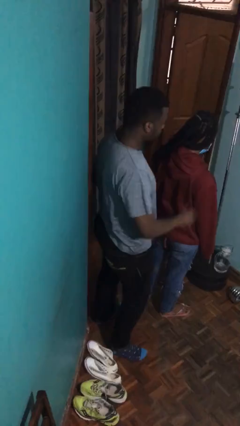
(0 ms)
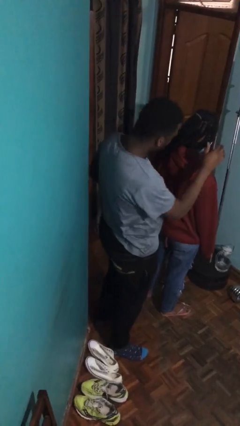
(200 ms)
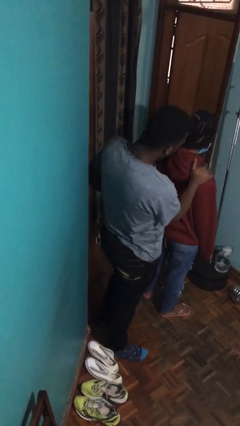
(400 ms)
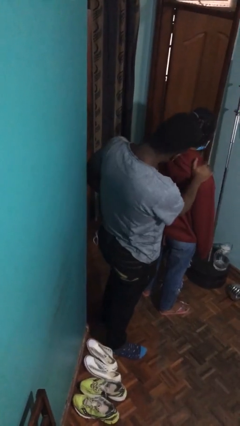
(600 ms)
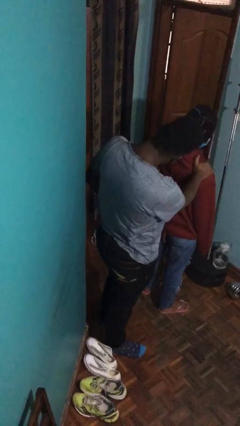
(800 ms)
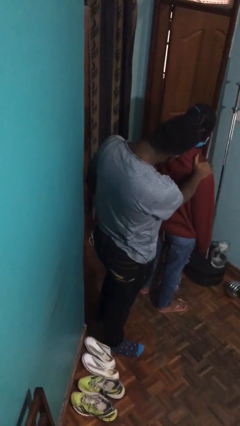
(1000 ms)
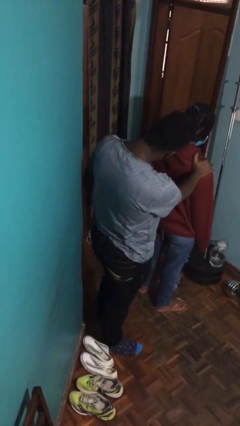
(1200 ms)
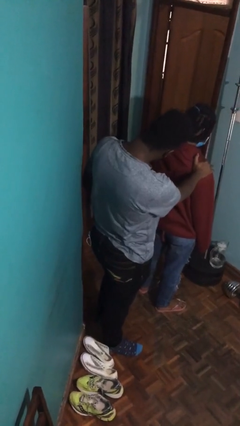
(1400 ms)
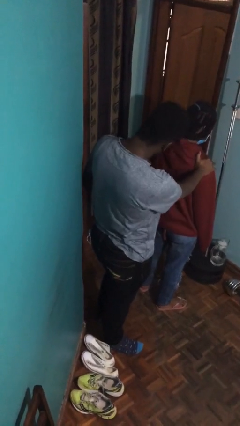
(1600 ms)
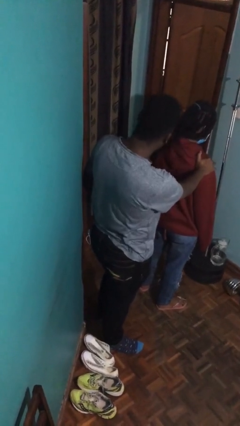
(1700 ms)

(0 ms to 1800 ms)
person grabs person by shoulder

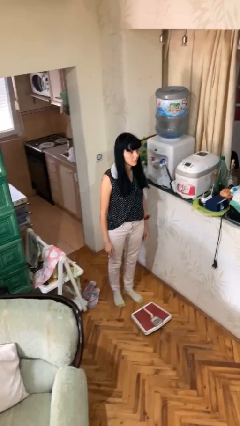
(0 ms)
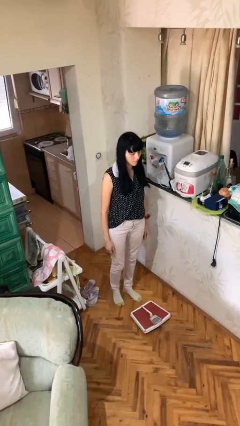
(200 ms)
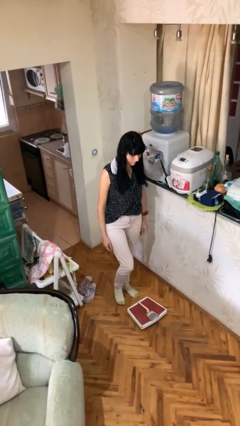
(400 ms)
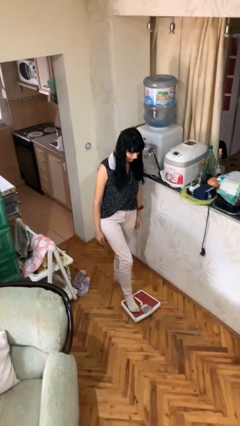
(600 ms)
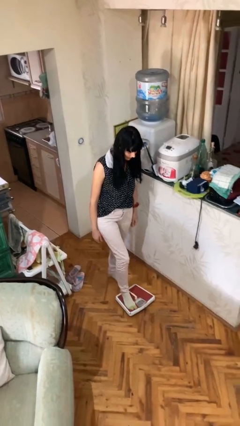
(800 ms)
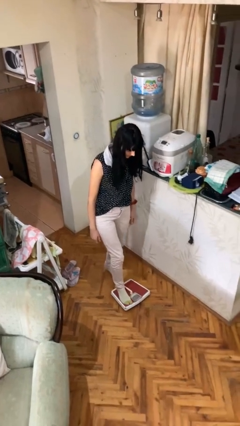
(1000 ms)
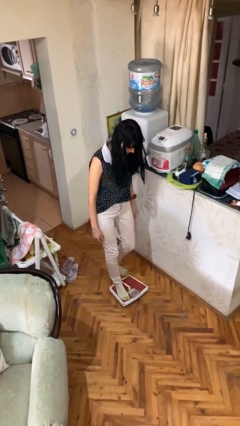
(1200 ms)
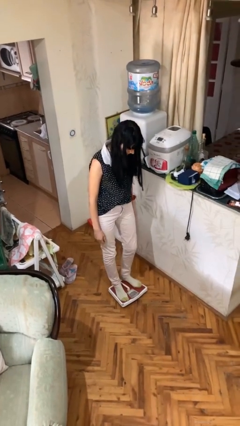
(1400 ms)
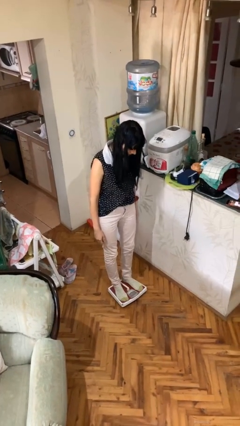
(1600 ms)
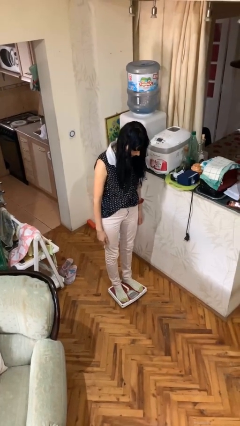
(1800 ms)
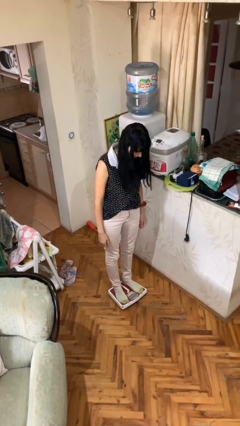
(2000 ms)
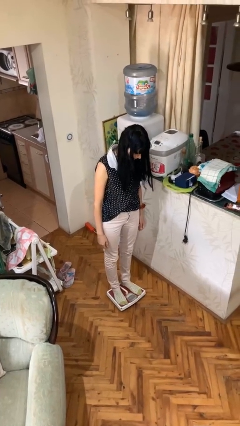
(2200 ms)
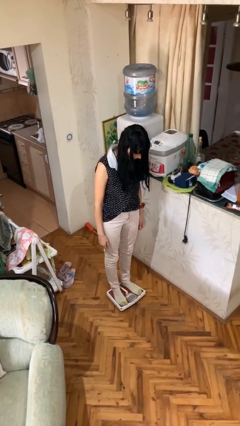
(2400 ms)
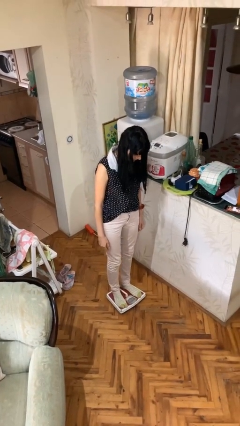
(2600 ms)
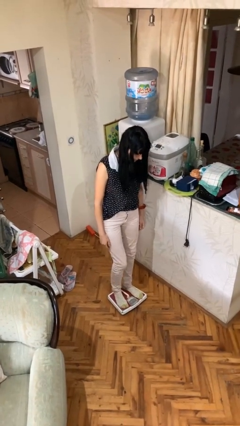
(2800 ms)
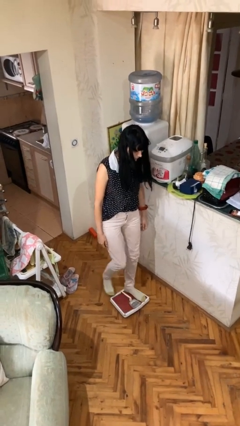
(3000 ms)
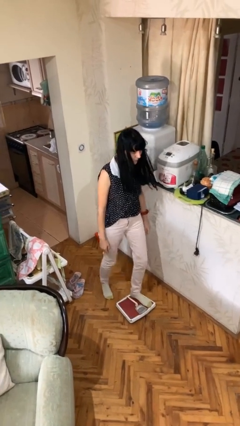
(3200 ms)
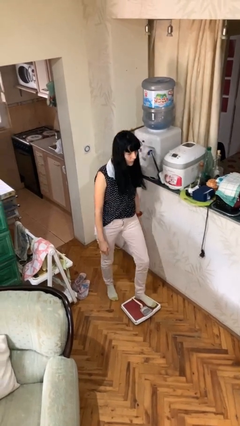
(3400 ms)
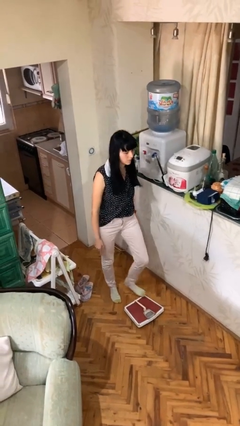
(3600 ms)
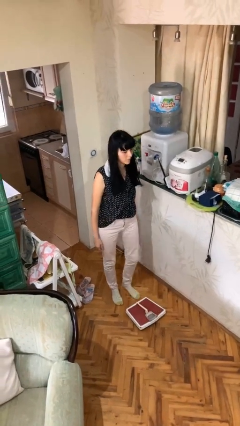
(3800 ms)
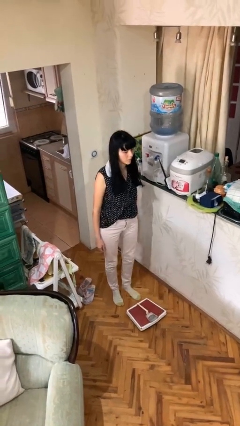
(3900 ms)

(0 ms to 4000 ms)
person uses bodyweight scale

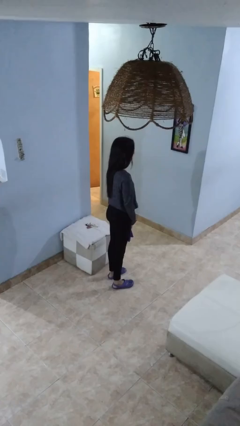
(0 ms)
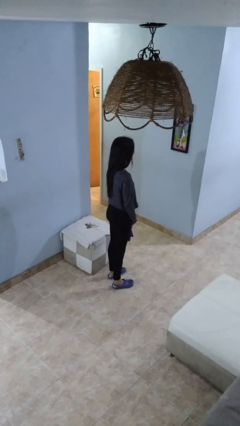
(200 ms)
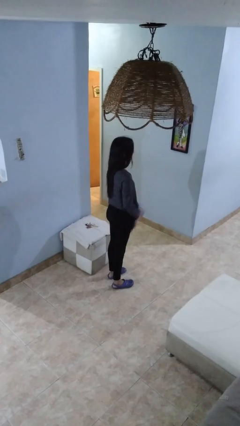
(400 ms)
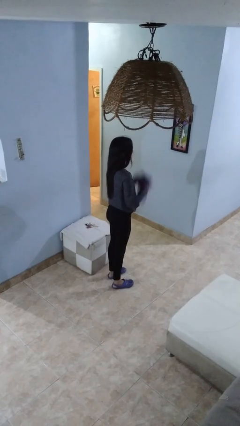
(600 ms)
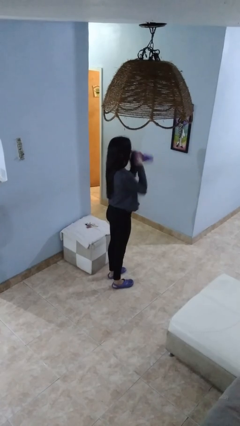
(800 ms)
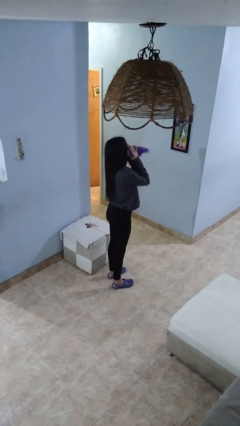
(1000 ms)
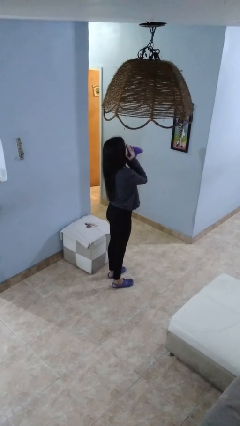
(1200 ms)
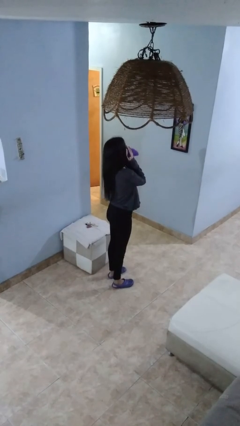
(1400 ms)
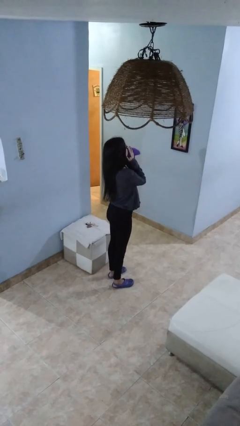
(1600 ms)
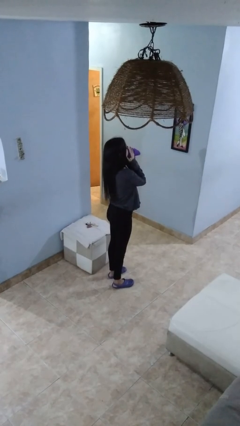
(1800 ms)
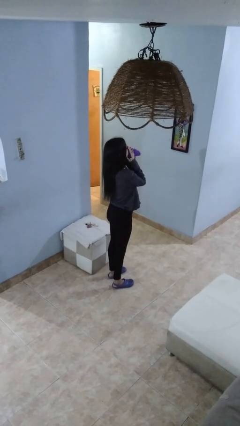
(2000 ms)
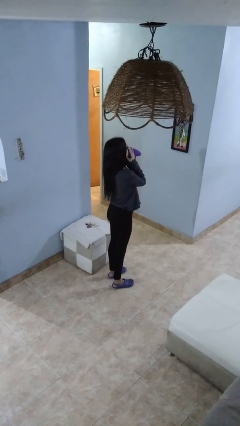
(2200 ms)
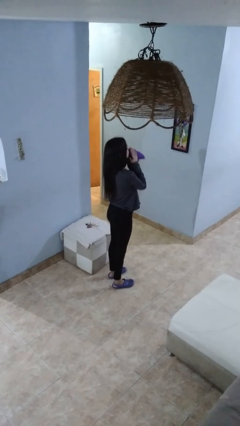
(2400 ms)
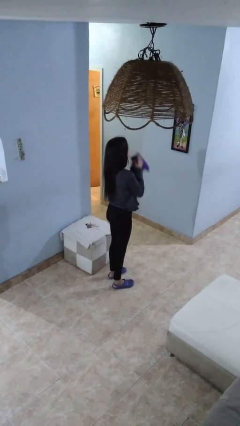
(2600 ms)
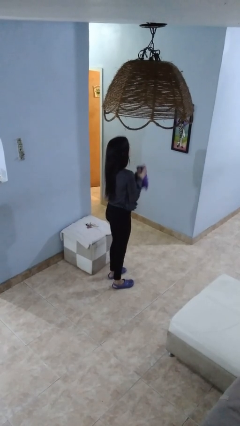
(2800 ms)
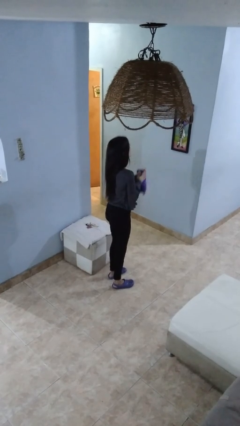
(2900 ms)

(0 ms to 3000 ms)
person blows nose

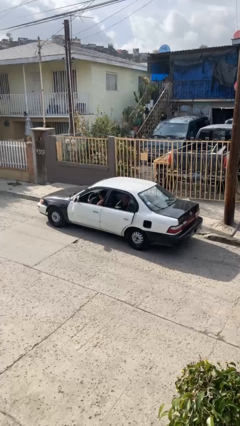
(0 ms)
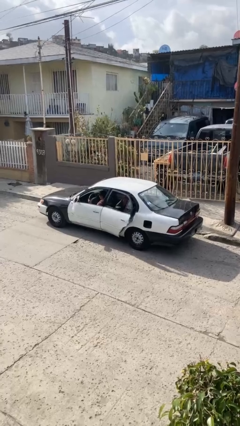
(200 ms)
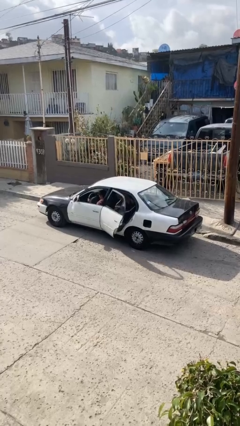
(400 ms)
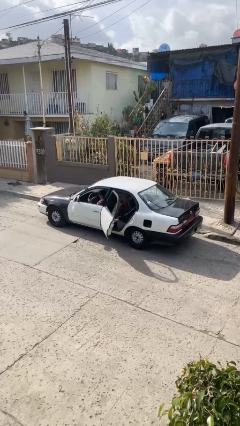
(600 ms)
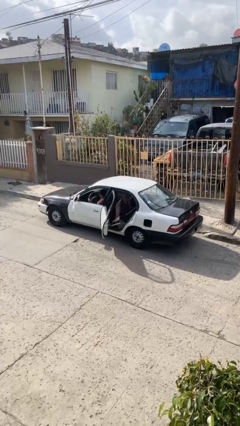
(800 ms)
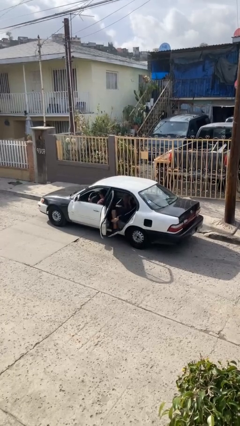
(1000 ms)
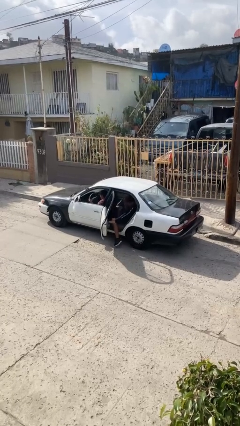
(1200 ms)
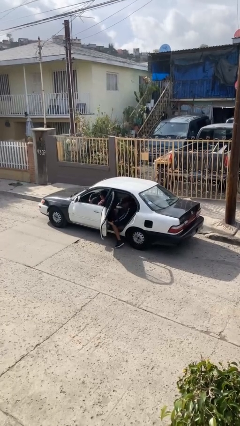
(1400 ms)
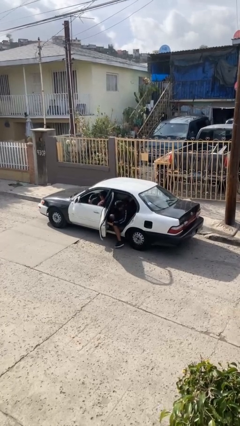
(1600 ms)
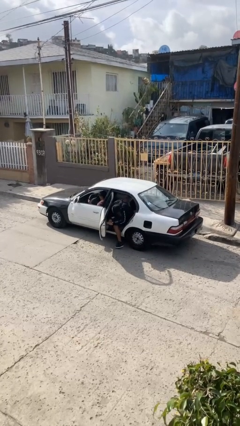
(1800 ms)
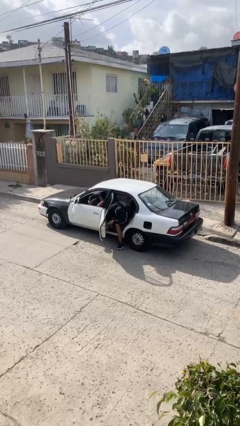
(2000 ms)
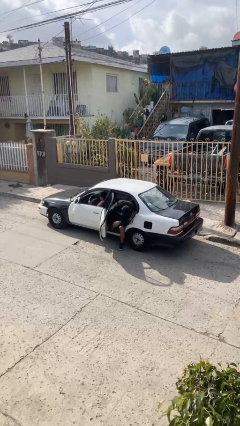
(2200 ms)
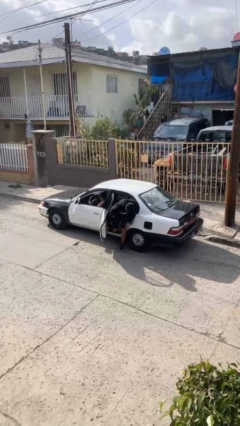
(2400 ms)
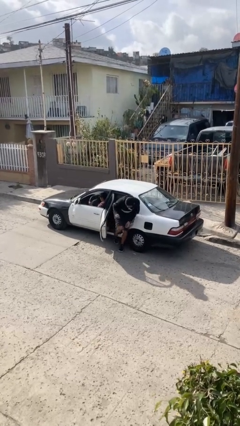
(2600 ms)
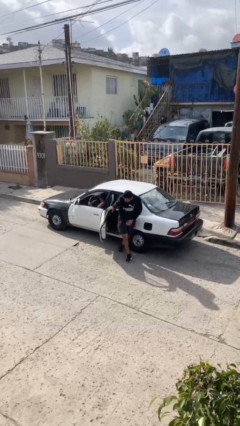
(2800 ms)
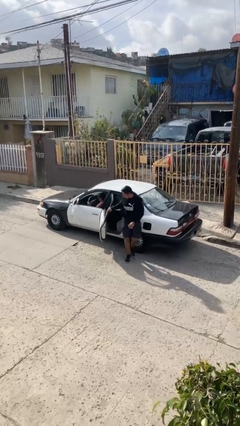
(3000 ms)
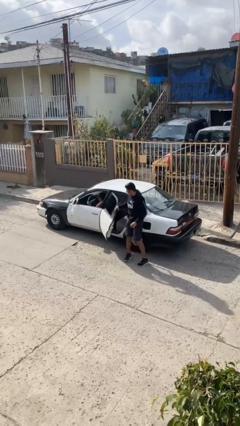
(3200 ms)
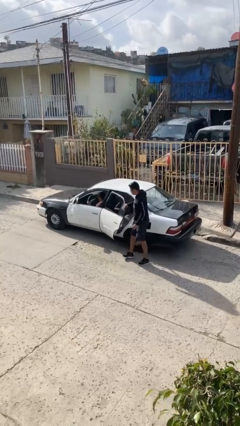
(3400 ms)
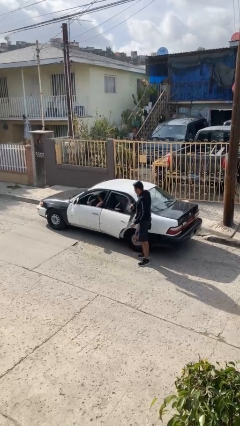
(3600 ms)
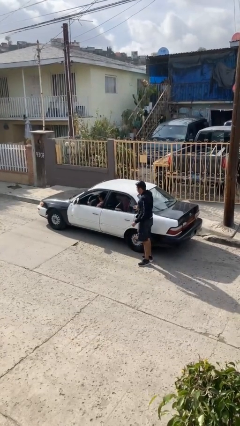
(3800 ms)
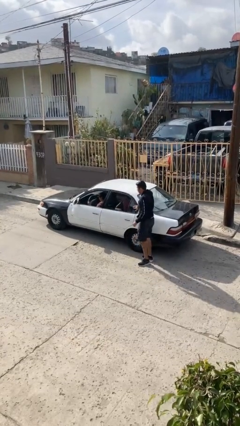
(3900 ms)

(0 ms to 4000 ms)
car drops off person

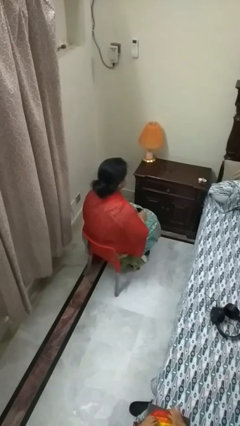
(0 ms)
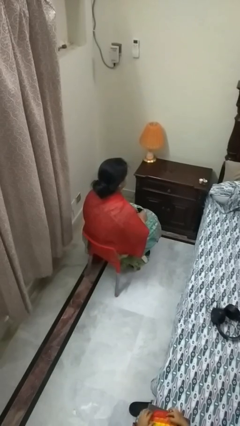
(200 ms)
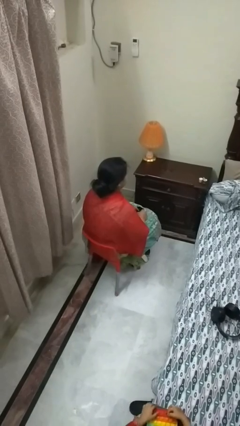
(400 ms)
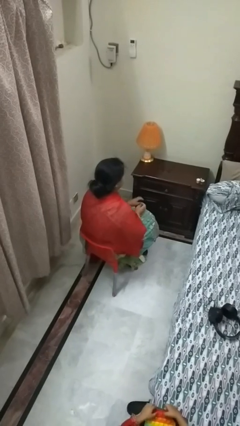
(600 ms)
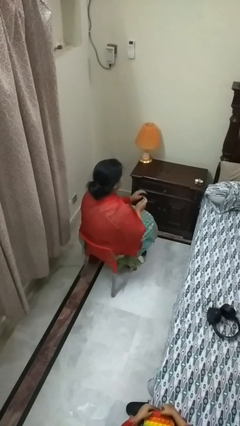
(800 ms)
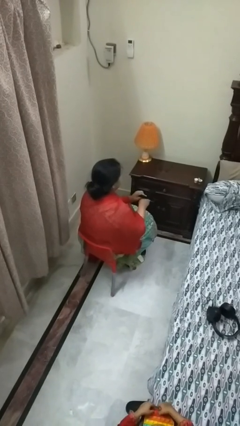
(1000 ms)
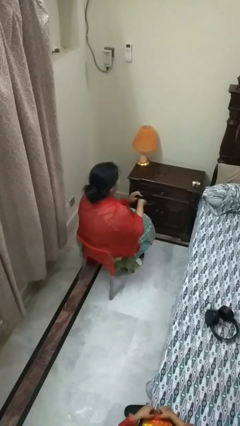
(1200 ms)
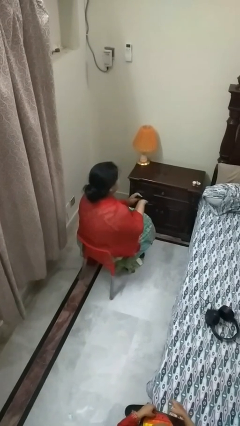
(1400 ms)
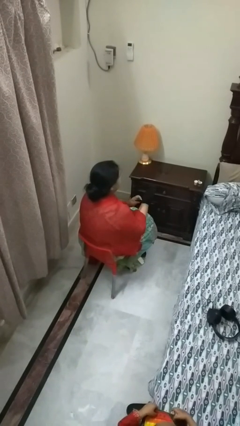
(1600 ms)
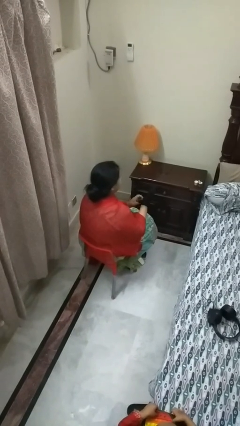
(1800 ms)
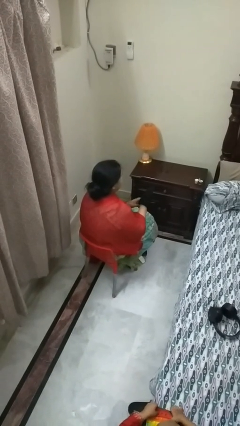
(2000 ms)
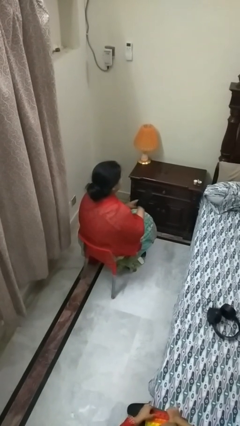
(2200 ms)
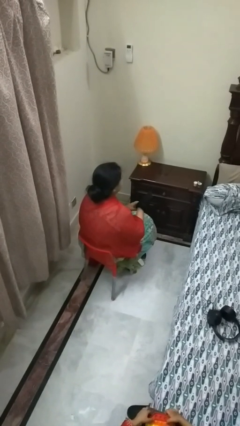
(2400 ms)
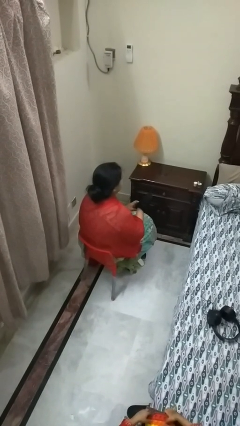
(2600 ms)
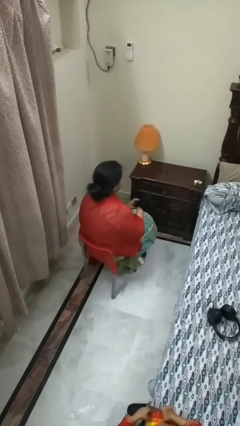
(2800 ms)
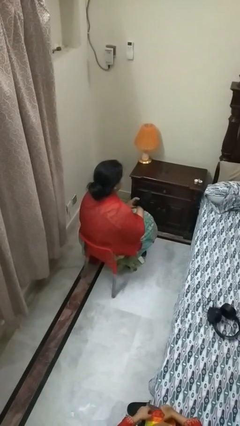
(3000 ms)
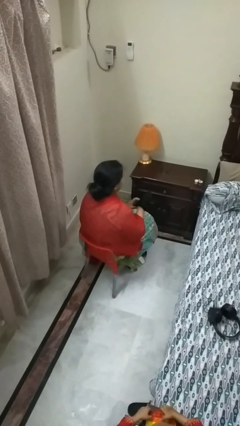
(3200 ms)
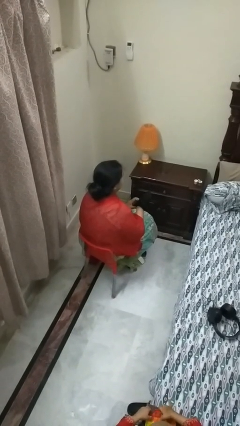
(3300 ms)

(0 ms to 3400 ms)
person puts on gloves

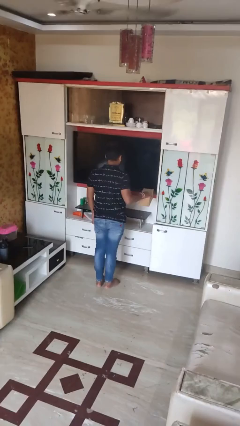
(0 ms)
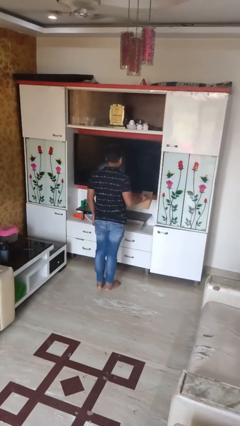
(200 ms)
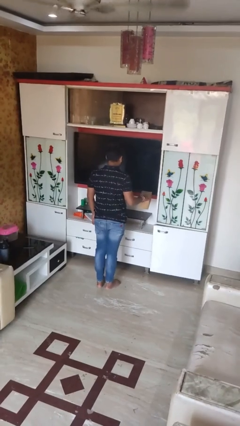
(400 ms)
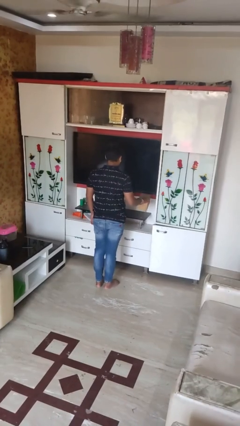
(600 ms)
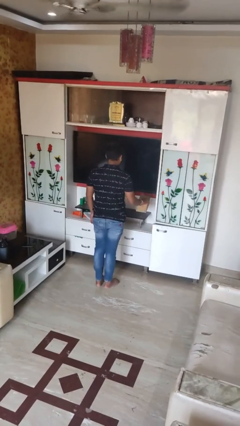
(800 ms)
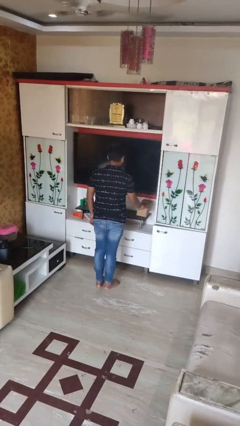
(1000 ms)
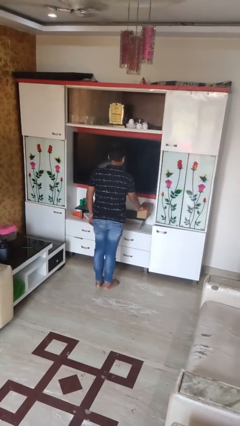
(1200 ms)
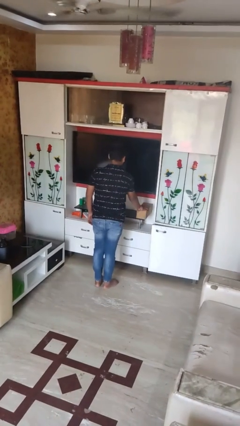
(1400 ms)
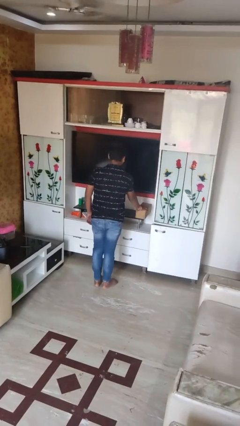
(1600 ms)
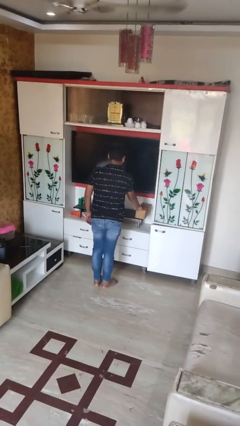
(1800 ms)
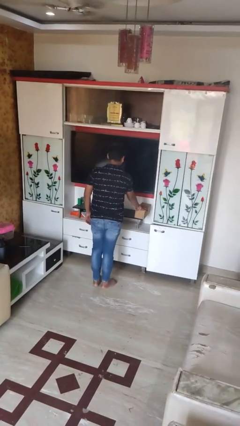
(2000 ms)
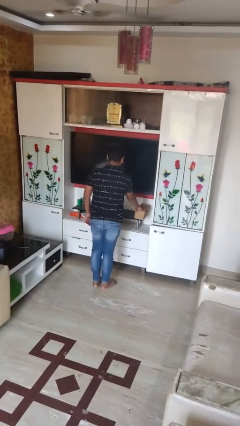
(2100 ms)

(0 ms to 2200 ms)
person puts down object on countertop
